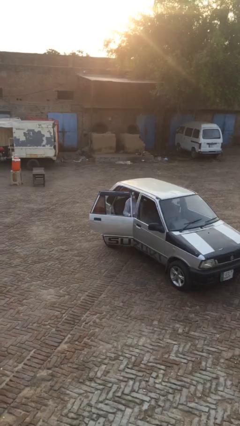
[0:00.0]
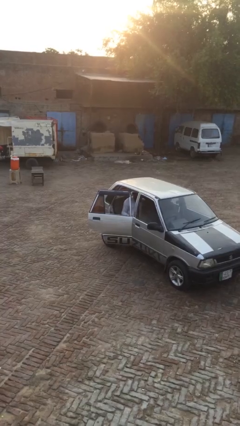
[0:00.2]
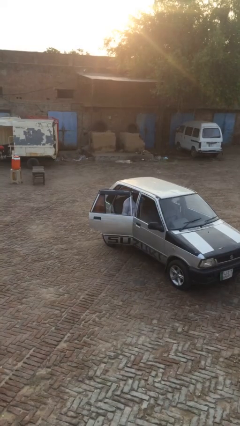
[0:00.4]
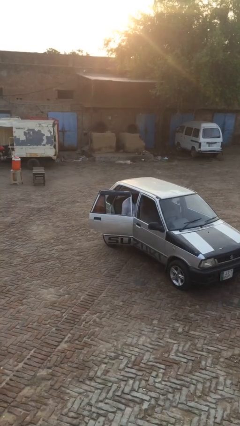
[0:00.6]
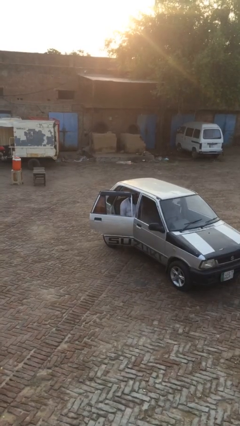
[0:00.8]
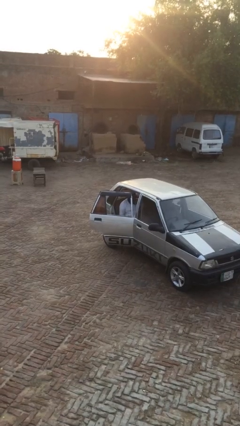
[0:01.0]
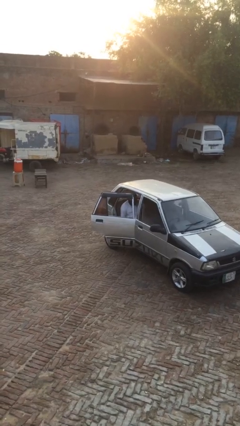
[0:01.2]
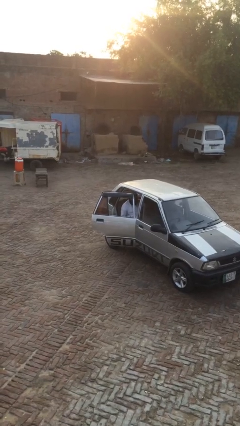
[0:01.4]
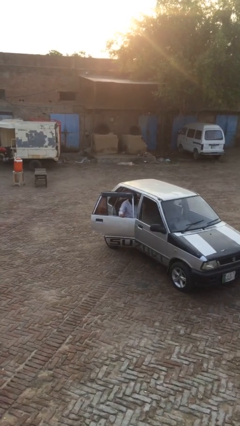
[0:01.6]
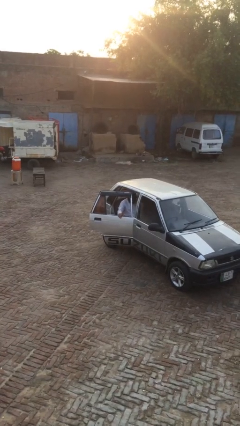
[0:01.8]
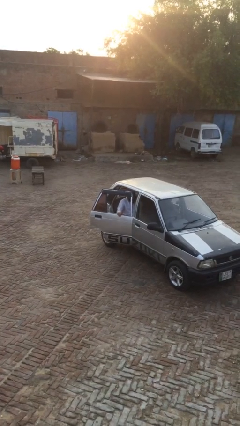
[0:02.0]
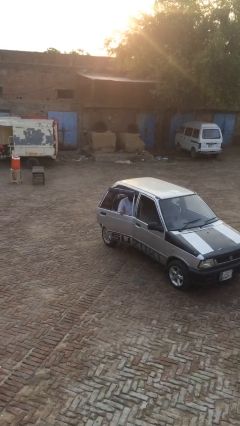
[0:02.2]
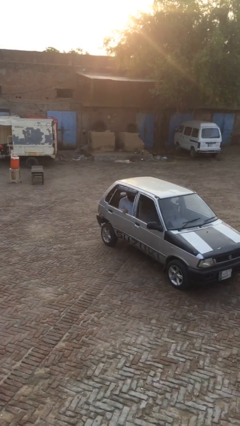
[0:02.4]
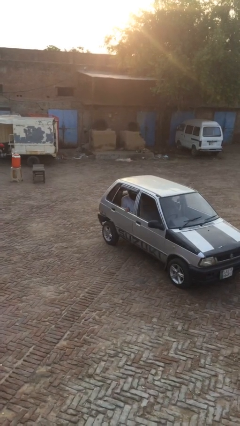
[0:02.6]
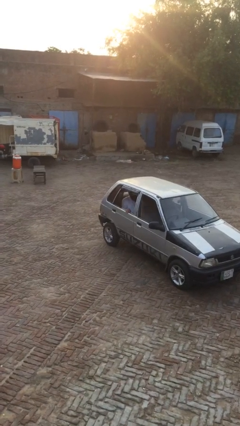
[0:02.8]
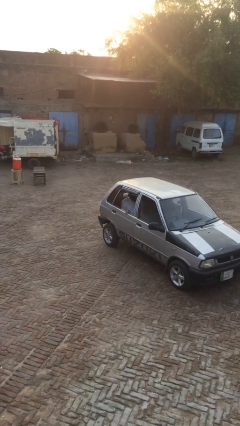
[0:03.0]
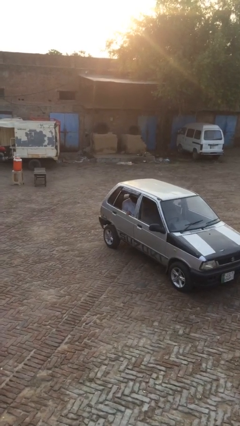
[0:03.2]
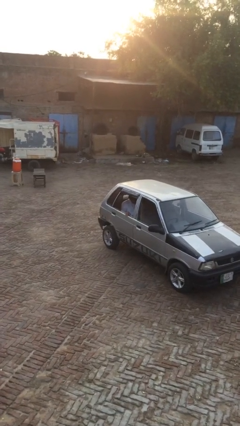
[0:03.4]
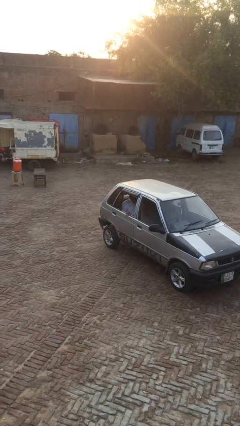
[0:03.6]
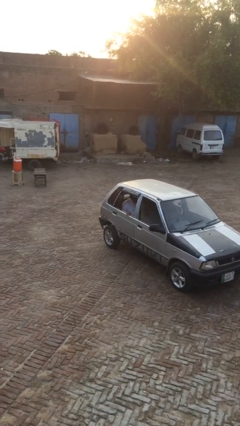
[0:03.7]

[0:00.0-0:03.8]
person closes car door

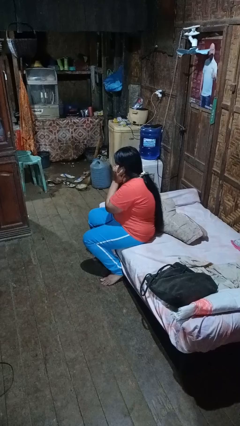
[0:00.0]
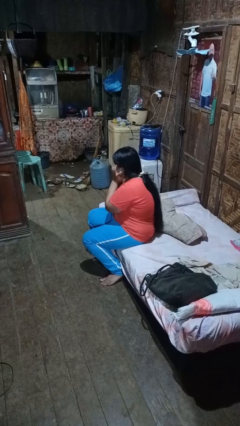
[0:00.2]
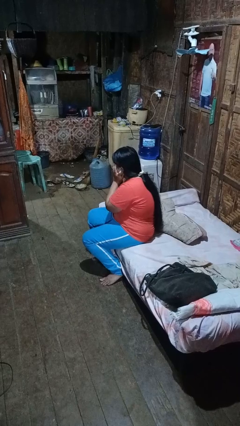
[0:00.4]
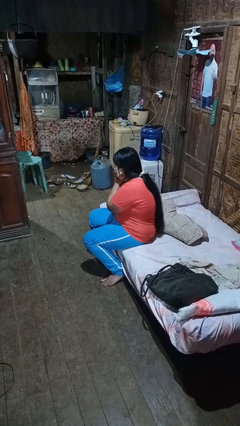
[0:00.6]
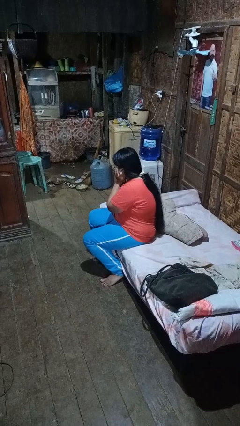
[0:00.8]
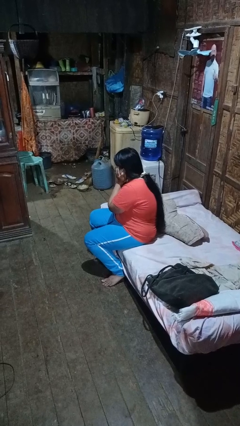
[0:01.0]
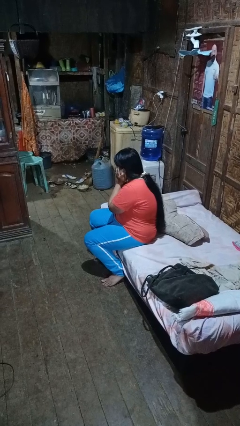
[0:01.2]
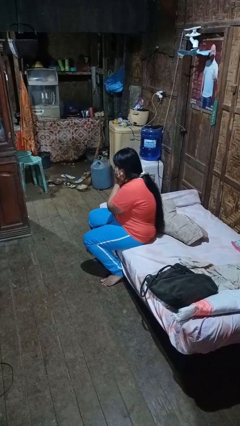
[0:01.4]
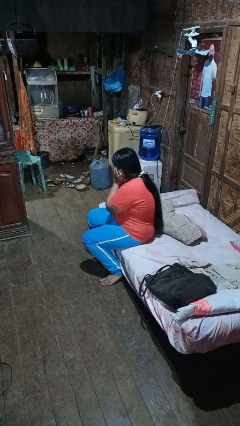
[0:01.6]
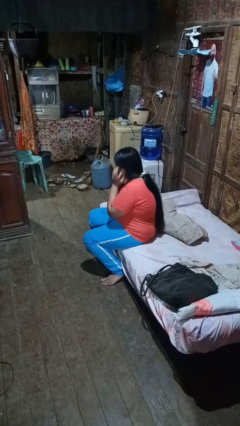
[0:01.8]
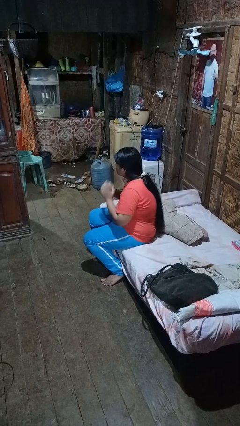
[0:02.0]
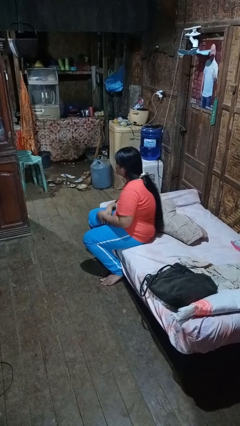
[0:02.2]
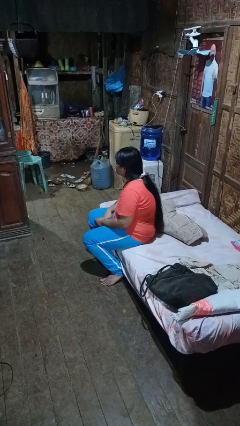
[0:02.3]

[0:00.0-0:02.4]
person puts fingers in ear

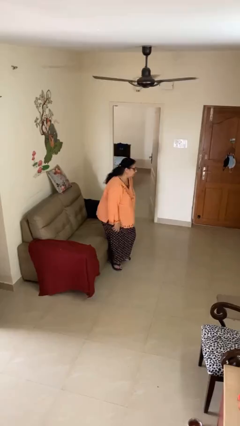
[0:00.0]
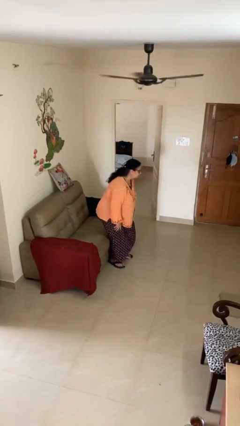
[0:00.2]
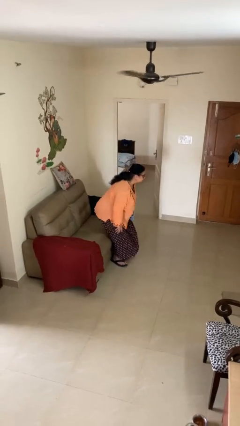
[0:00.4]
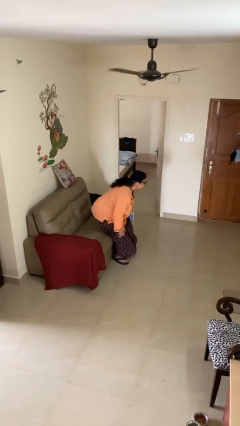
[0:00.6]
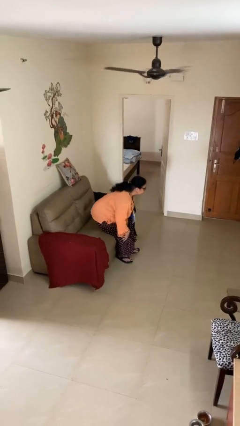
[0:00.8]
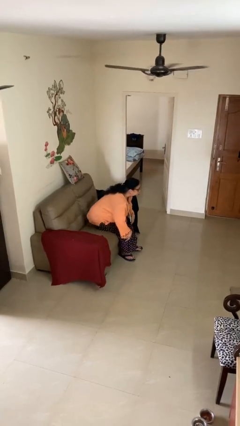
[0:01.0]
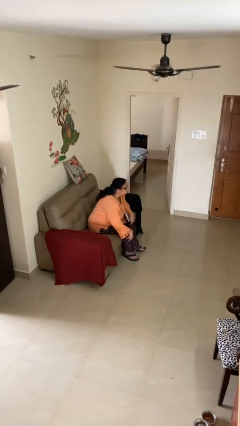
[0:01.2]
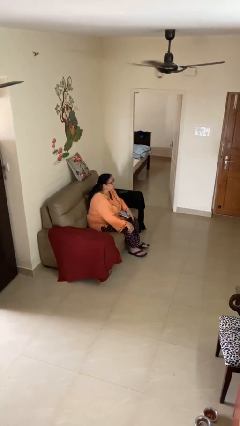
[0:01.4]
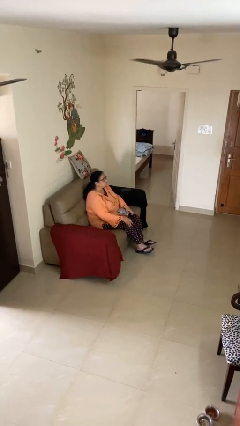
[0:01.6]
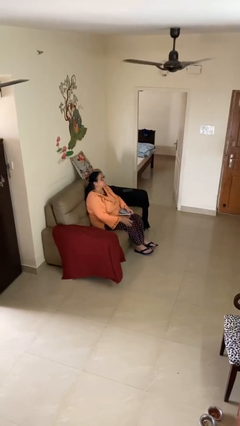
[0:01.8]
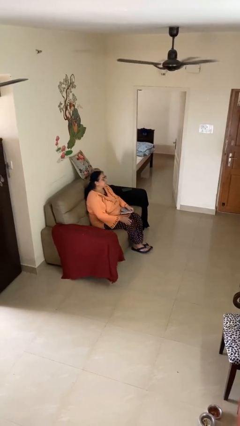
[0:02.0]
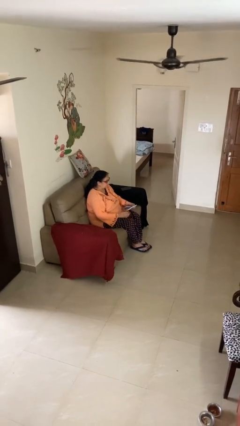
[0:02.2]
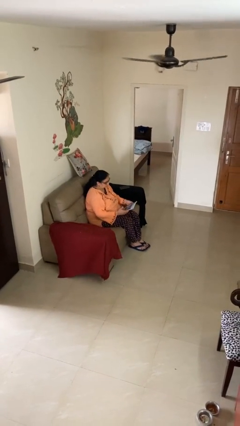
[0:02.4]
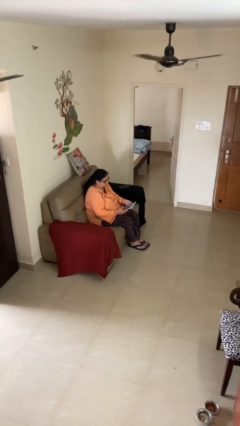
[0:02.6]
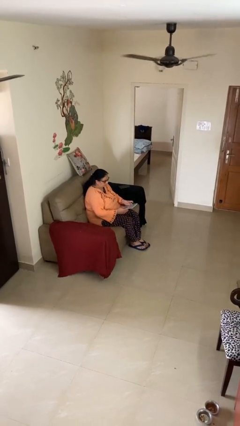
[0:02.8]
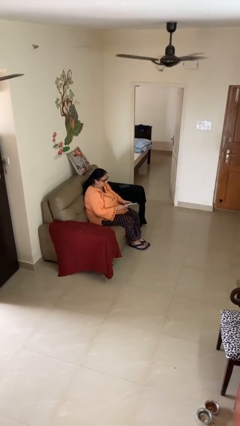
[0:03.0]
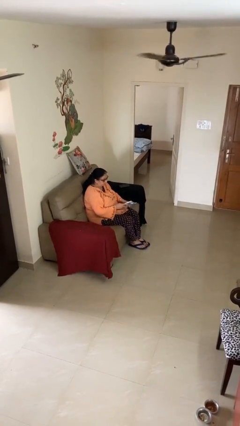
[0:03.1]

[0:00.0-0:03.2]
person sits down

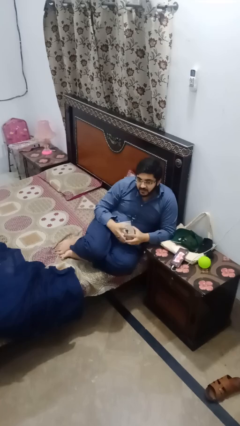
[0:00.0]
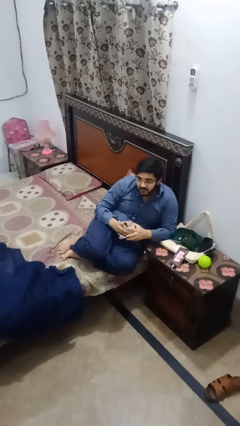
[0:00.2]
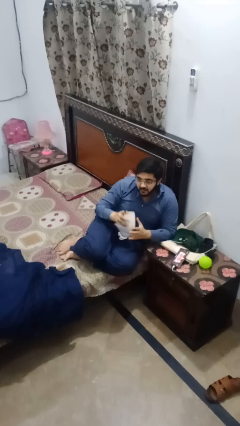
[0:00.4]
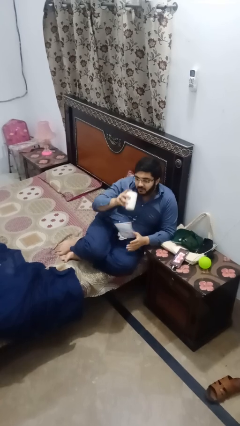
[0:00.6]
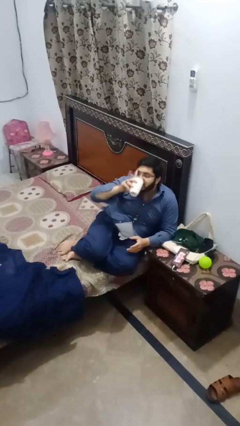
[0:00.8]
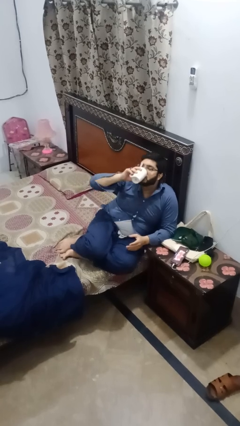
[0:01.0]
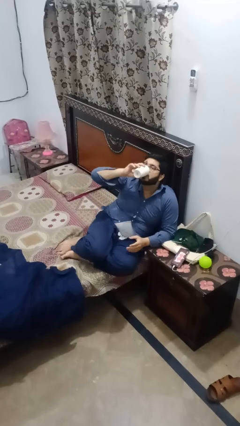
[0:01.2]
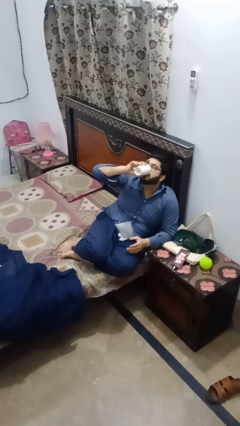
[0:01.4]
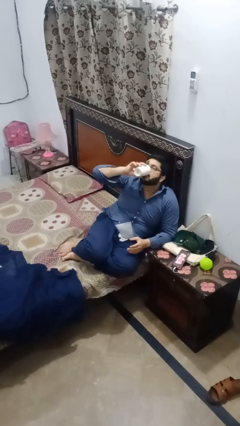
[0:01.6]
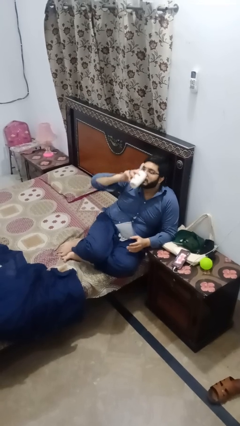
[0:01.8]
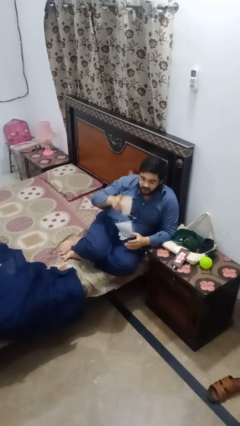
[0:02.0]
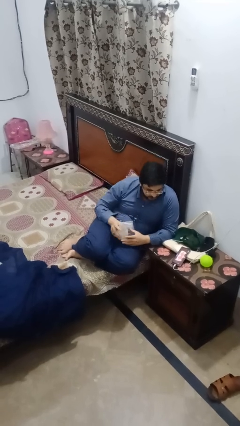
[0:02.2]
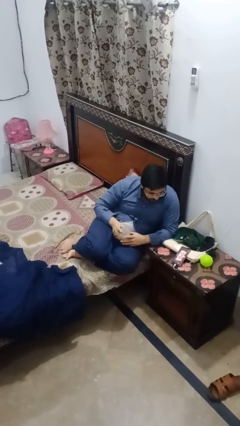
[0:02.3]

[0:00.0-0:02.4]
person drinks from mug

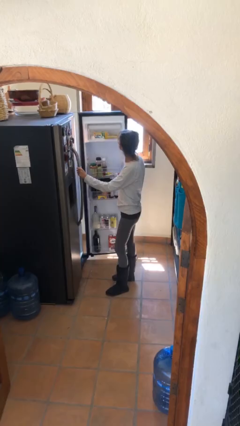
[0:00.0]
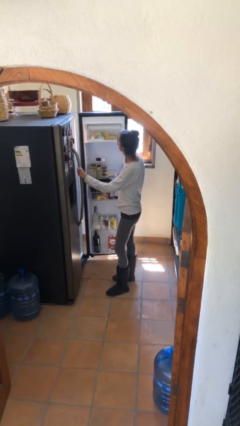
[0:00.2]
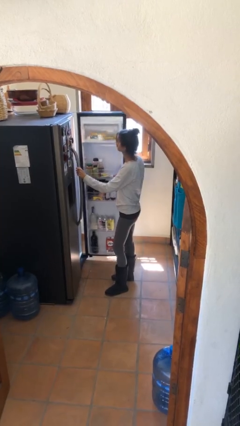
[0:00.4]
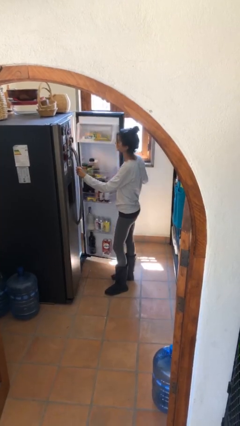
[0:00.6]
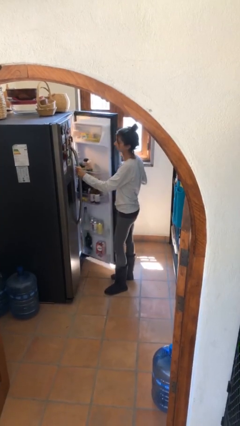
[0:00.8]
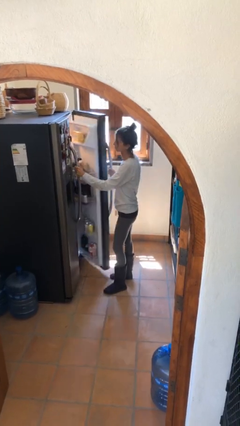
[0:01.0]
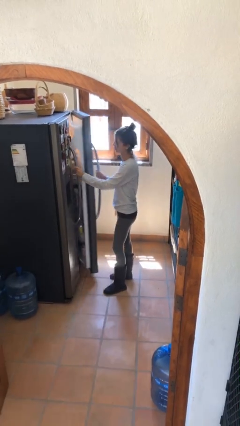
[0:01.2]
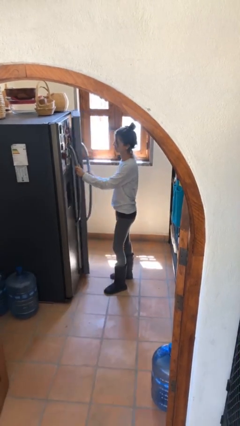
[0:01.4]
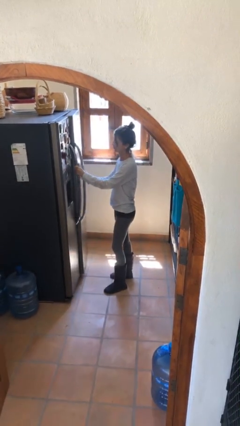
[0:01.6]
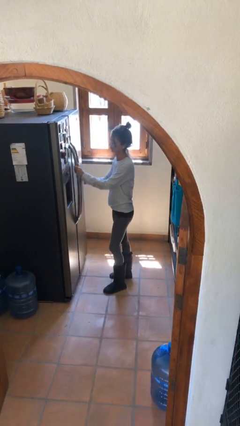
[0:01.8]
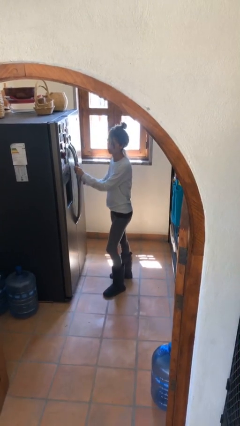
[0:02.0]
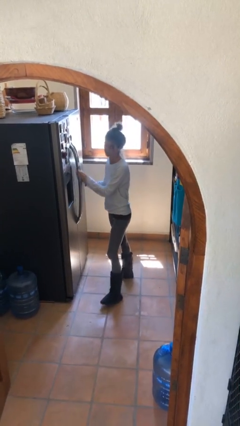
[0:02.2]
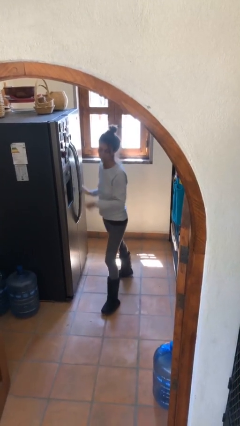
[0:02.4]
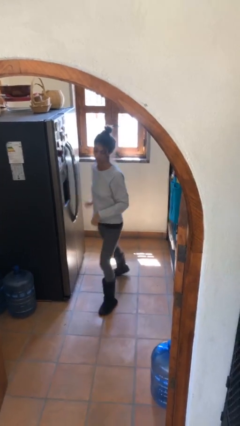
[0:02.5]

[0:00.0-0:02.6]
person closes refrigerator

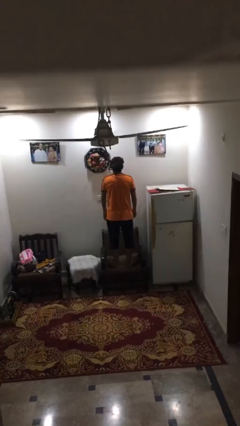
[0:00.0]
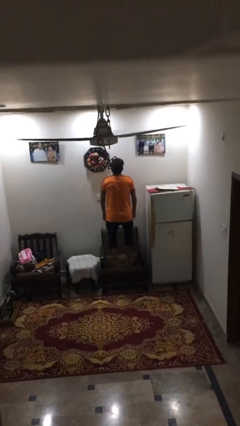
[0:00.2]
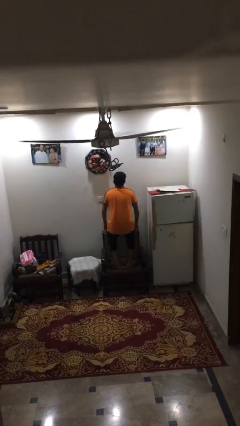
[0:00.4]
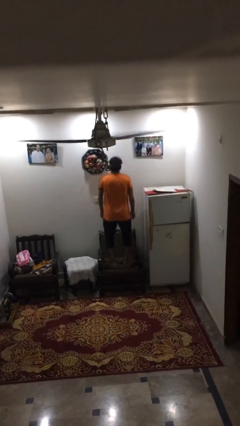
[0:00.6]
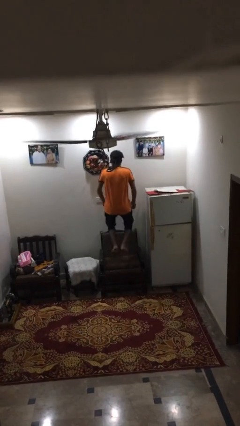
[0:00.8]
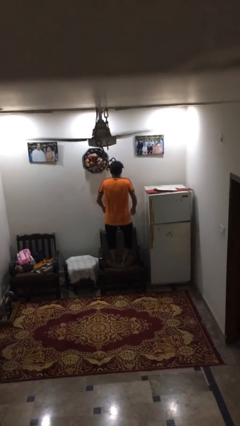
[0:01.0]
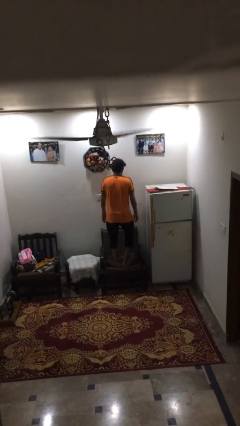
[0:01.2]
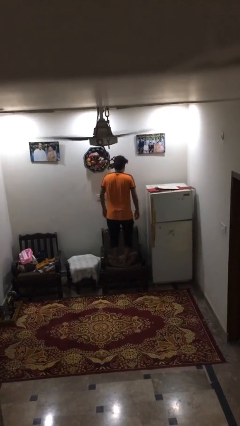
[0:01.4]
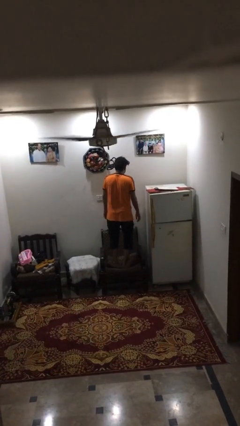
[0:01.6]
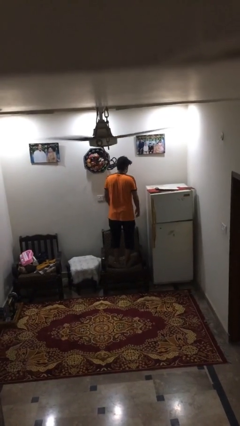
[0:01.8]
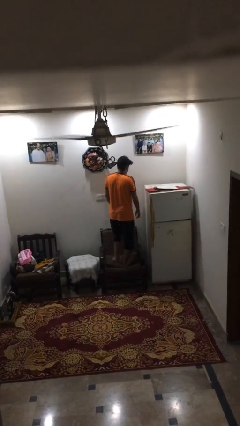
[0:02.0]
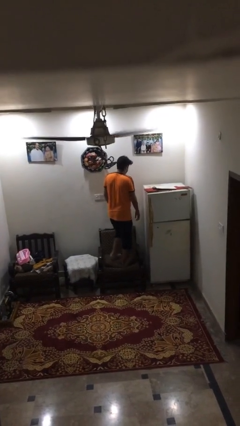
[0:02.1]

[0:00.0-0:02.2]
person jumps on couch

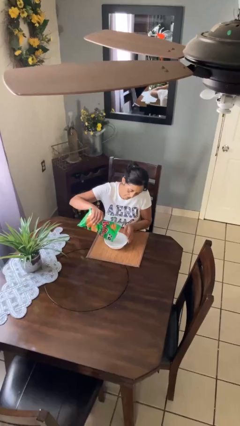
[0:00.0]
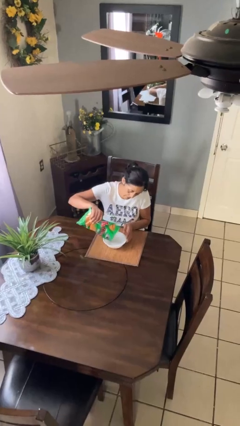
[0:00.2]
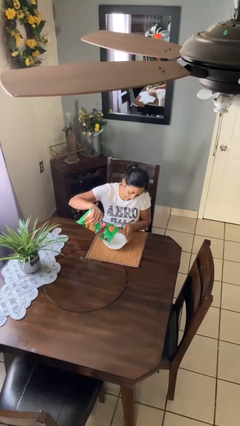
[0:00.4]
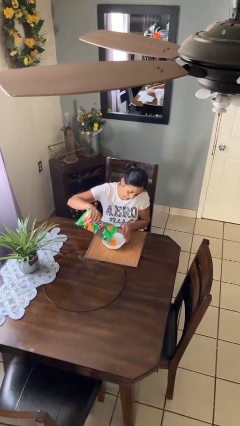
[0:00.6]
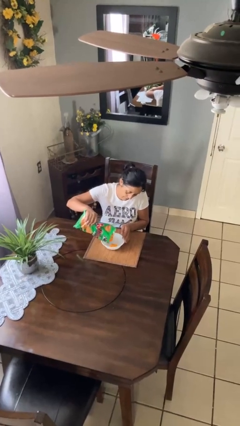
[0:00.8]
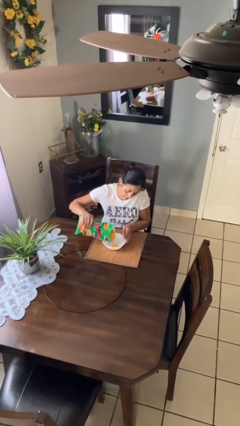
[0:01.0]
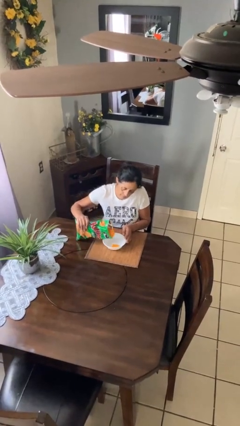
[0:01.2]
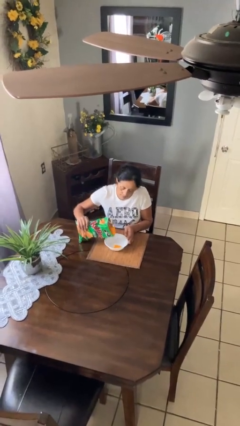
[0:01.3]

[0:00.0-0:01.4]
person pours into bowl
